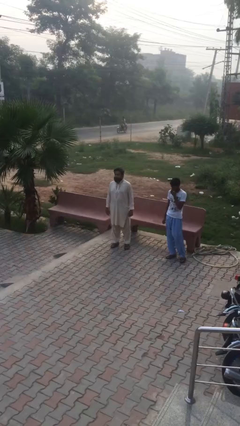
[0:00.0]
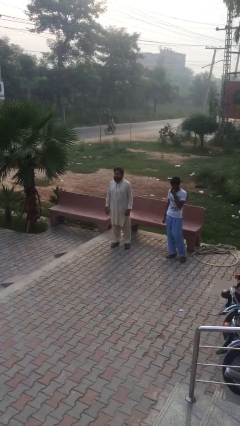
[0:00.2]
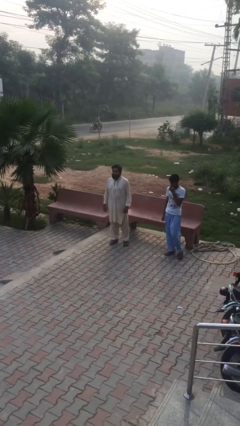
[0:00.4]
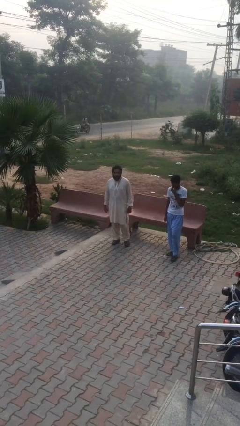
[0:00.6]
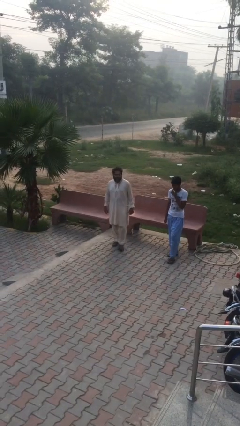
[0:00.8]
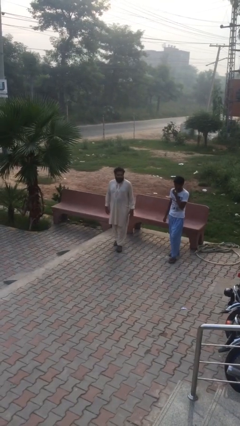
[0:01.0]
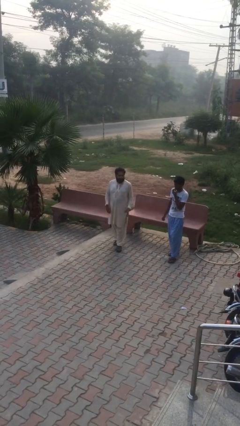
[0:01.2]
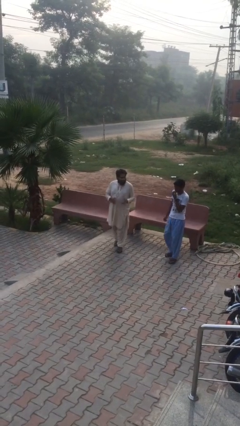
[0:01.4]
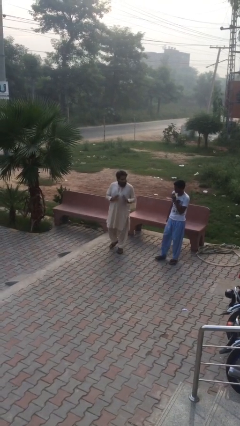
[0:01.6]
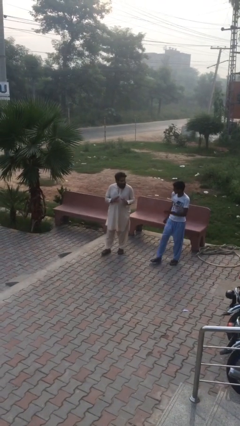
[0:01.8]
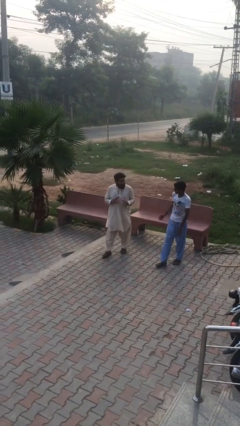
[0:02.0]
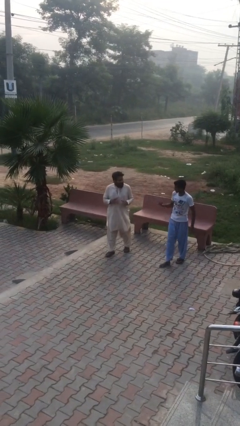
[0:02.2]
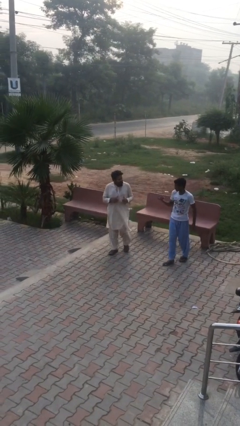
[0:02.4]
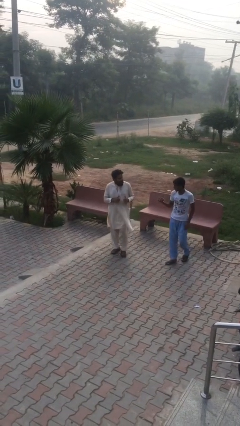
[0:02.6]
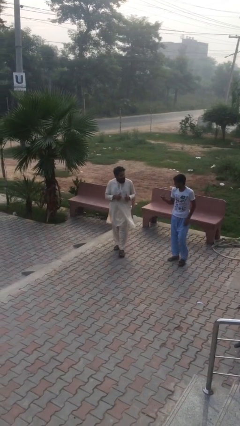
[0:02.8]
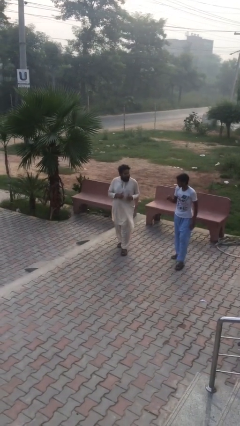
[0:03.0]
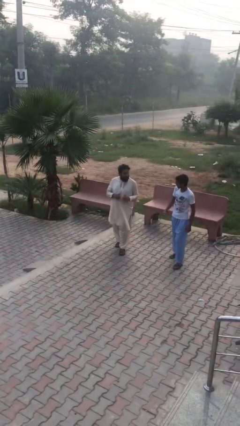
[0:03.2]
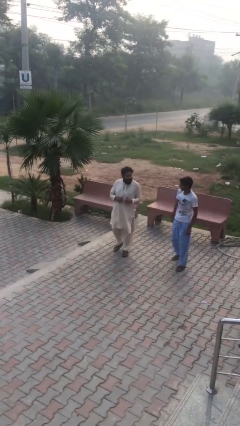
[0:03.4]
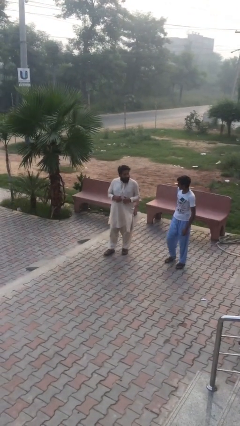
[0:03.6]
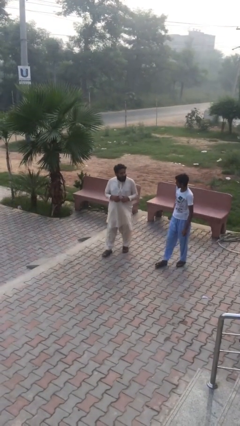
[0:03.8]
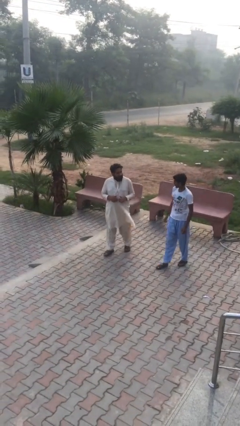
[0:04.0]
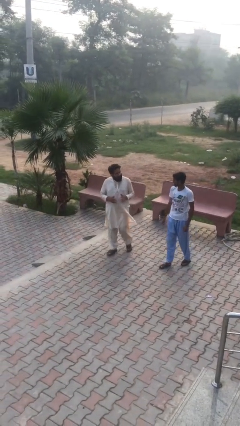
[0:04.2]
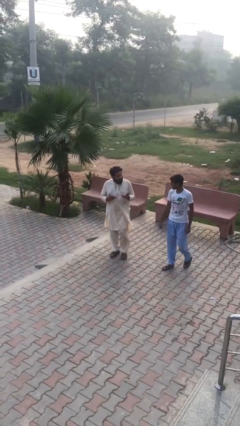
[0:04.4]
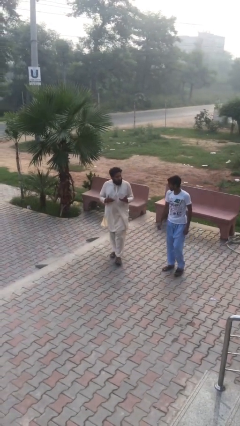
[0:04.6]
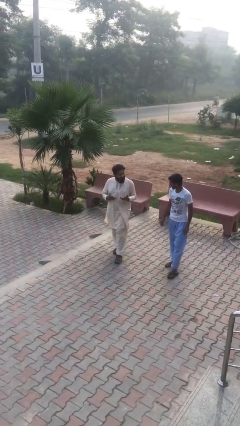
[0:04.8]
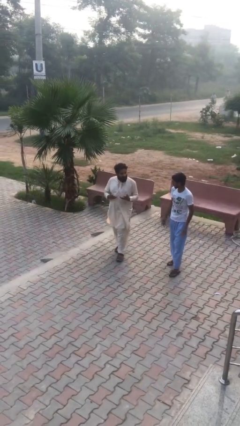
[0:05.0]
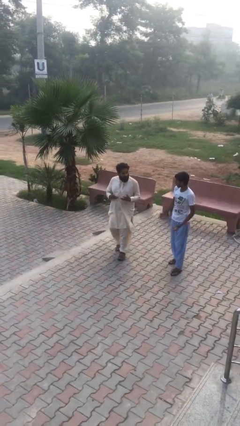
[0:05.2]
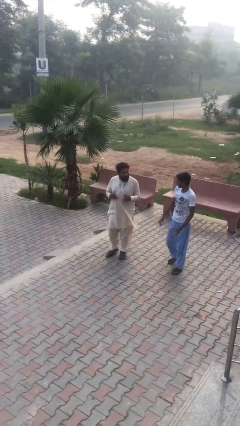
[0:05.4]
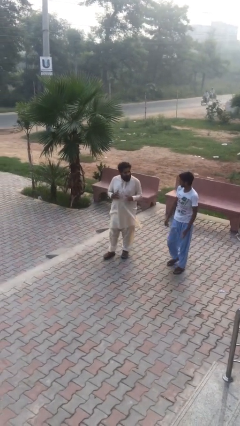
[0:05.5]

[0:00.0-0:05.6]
person talks to person

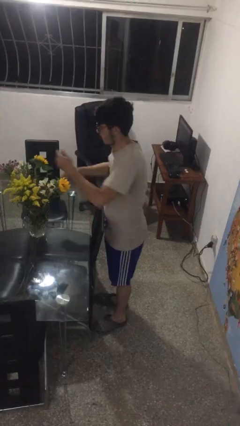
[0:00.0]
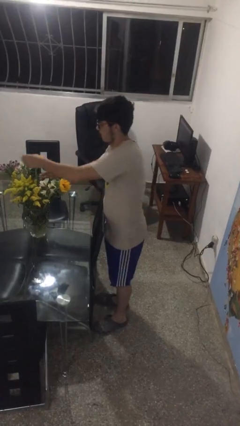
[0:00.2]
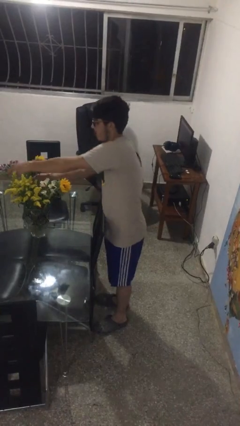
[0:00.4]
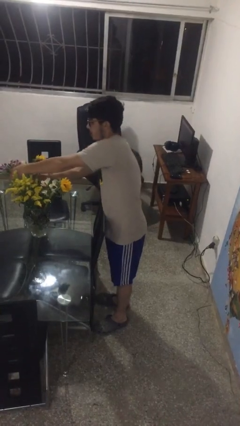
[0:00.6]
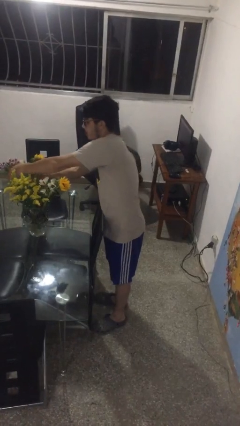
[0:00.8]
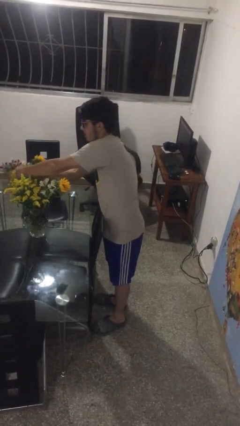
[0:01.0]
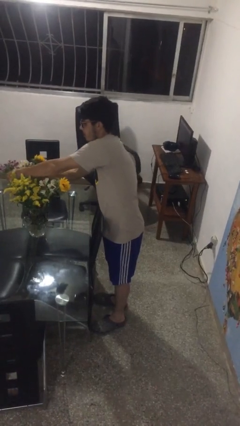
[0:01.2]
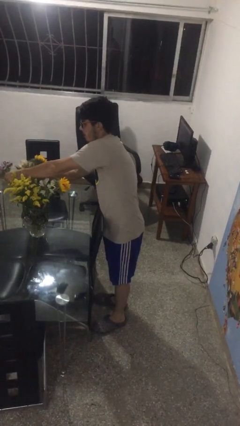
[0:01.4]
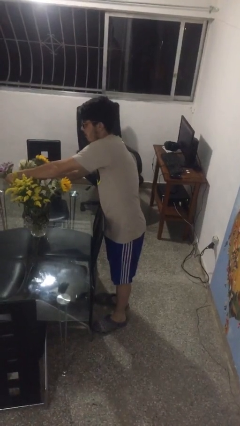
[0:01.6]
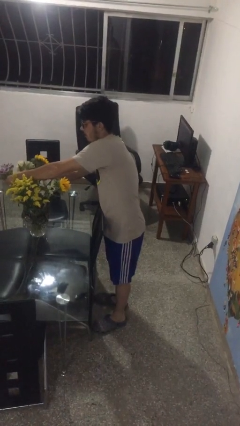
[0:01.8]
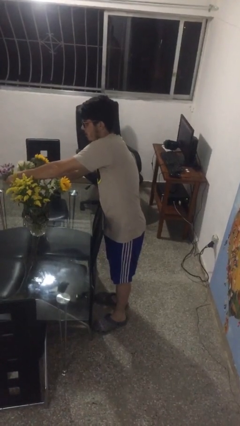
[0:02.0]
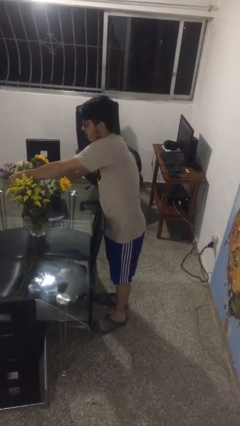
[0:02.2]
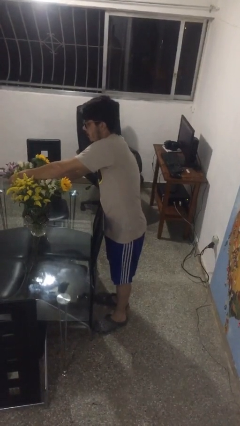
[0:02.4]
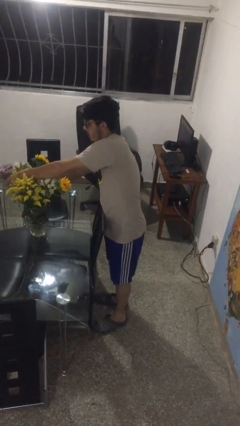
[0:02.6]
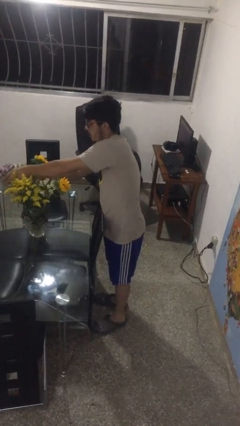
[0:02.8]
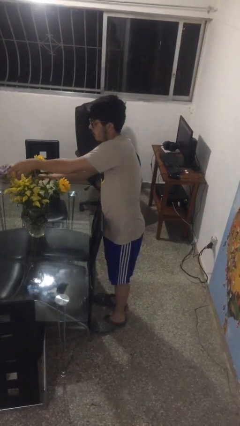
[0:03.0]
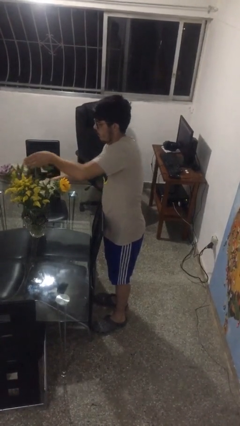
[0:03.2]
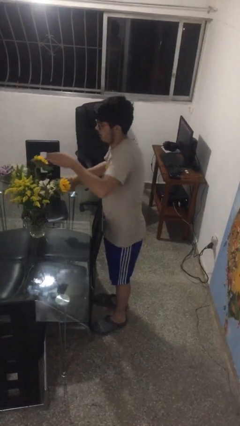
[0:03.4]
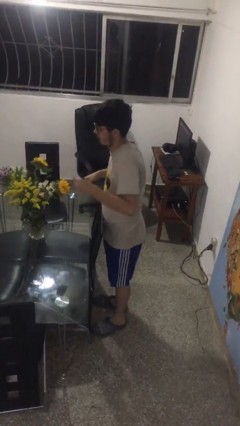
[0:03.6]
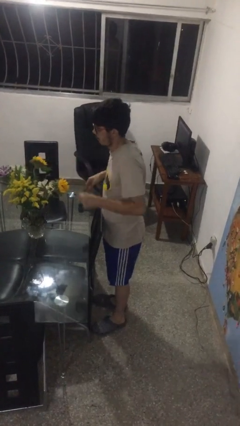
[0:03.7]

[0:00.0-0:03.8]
person arranges flowers in vase

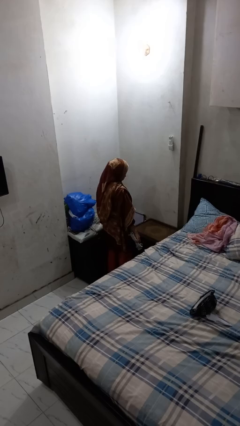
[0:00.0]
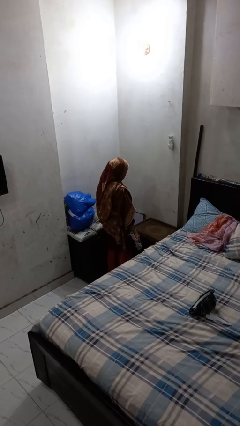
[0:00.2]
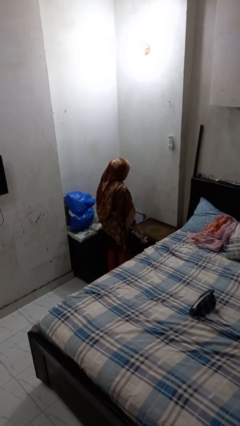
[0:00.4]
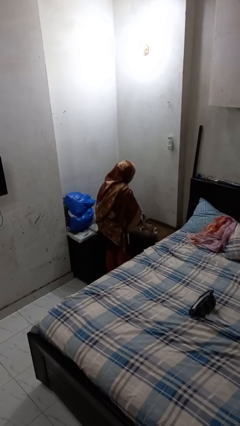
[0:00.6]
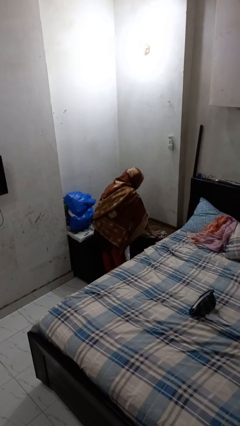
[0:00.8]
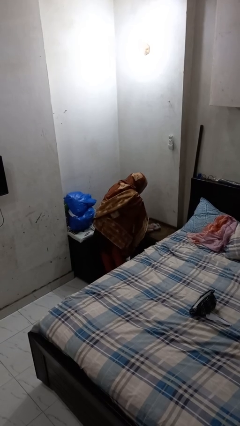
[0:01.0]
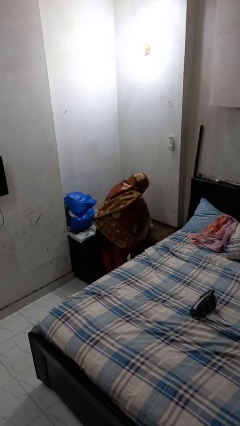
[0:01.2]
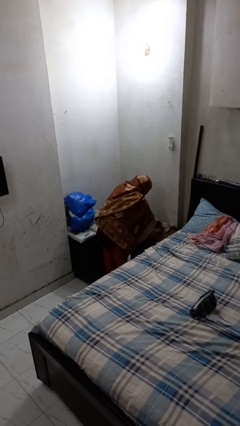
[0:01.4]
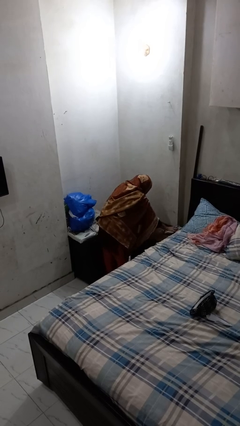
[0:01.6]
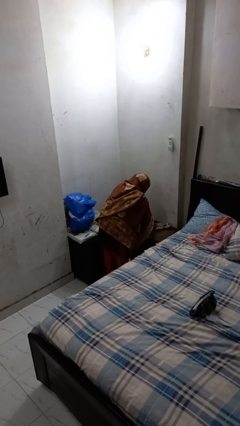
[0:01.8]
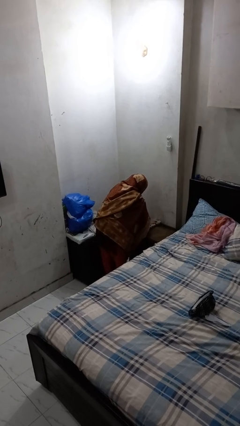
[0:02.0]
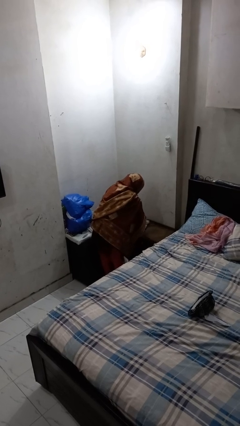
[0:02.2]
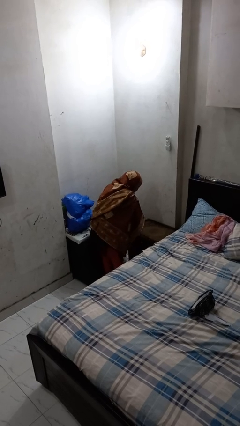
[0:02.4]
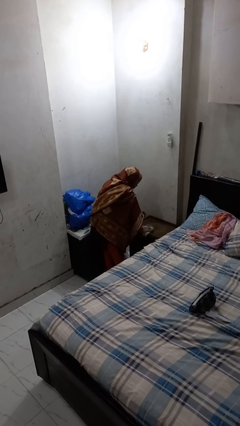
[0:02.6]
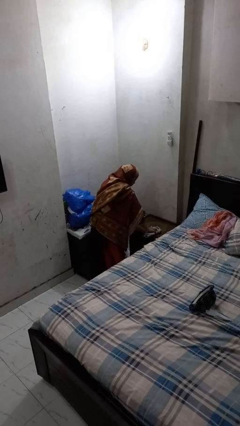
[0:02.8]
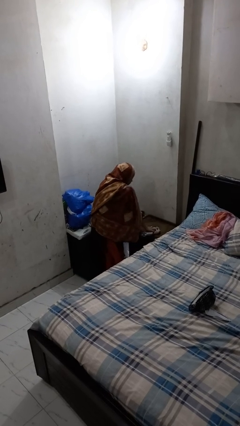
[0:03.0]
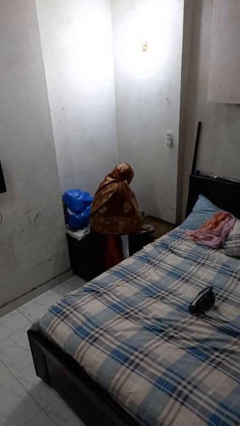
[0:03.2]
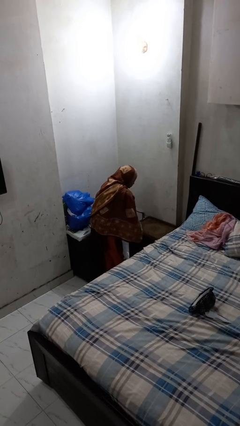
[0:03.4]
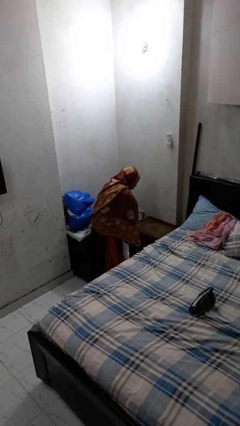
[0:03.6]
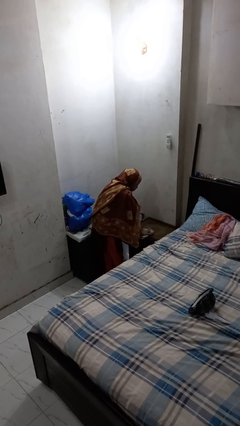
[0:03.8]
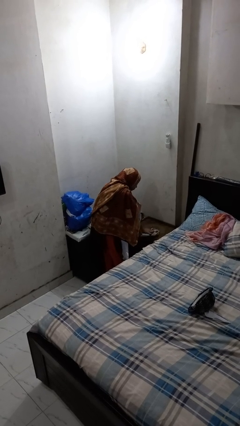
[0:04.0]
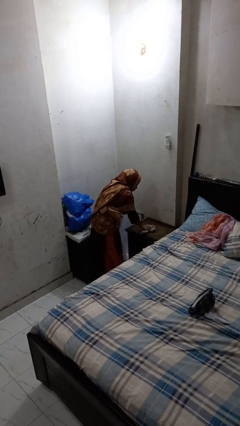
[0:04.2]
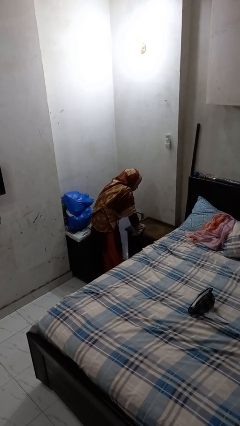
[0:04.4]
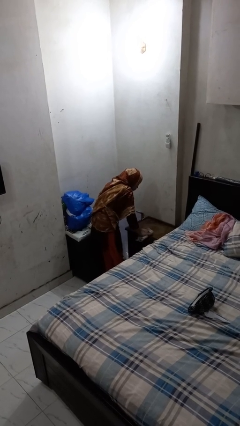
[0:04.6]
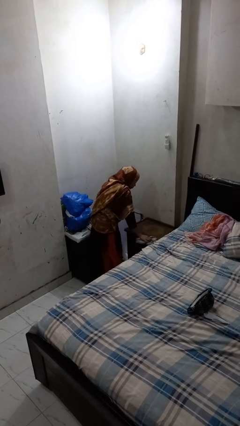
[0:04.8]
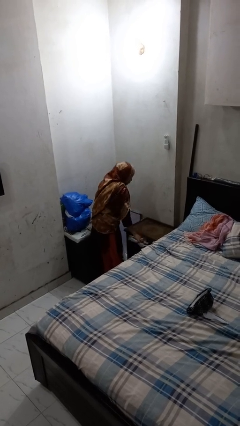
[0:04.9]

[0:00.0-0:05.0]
person cleans table with rag

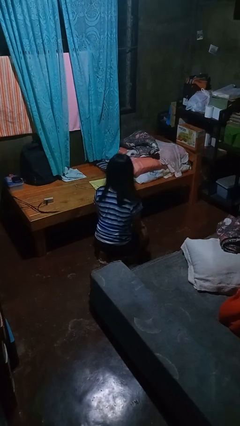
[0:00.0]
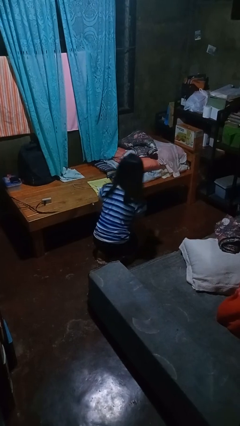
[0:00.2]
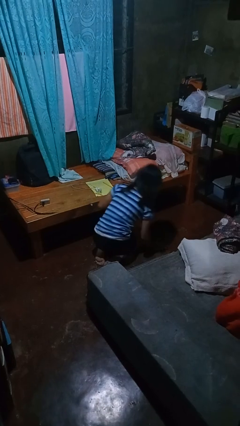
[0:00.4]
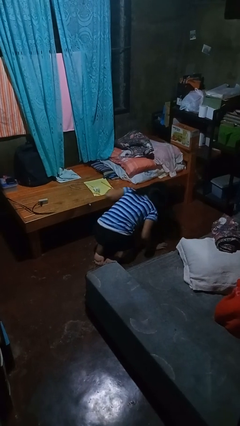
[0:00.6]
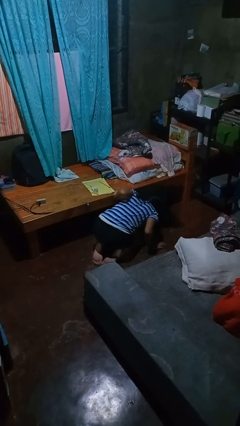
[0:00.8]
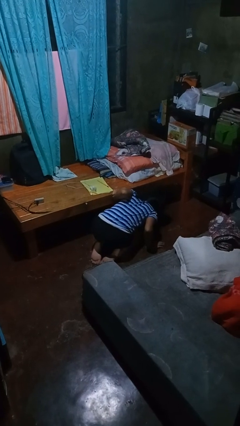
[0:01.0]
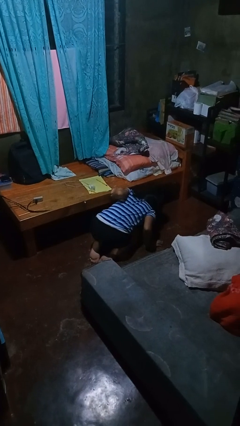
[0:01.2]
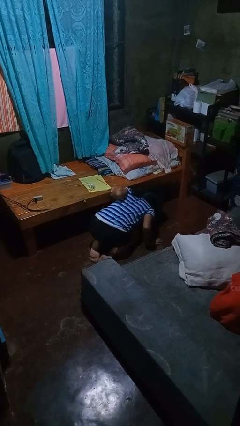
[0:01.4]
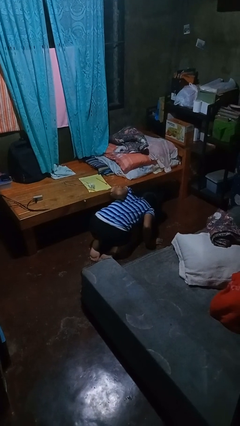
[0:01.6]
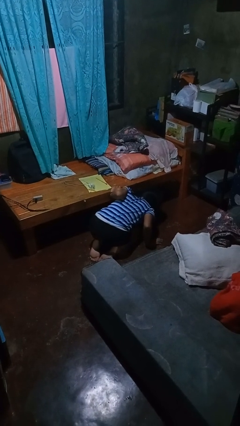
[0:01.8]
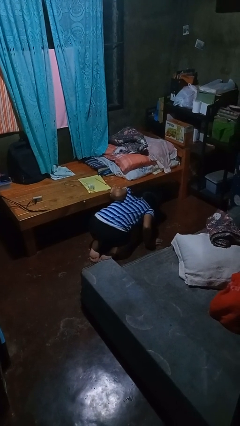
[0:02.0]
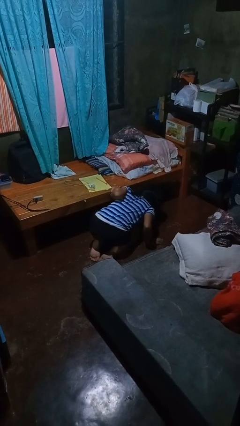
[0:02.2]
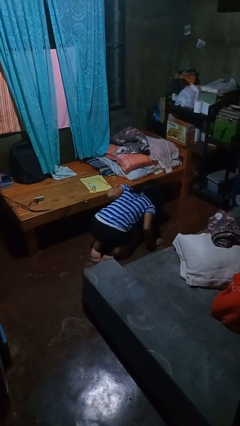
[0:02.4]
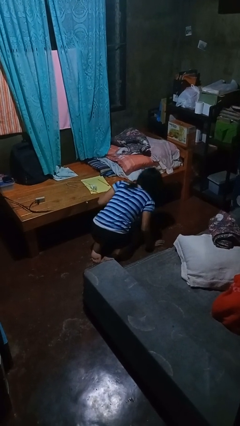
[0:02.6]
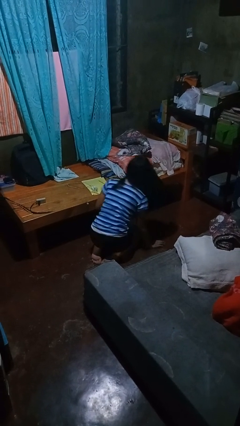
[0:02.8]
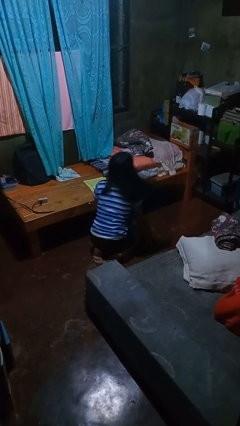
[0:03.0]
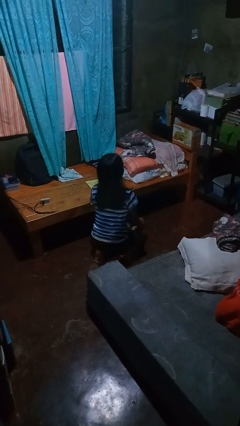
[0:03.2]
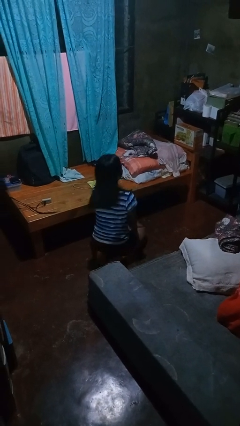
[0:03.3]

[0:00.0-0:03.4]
person searches under bed
